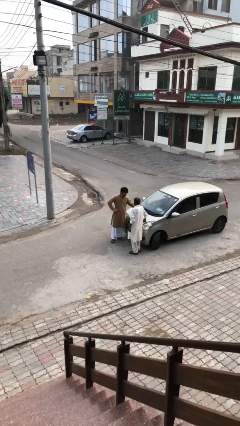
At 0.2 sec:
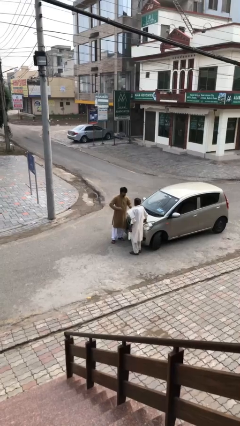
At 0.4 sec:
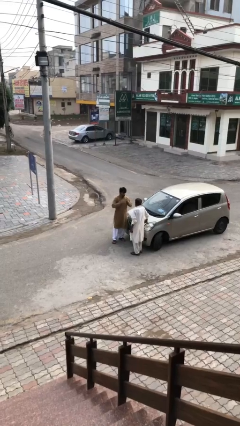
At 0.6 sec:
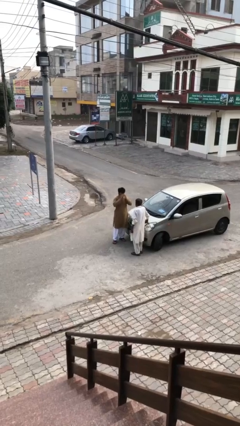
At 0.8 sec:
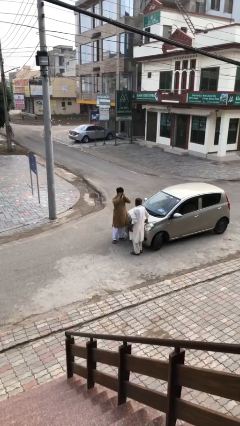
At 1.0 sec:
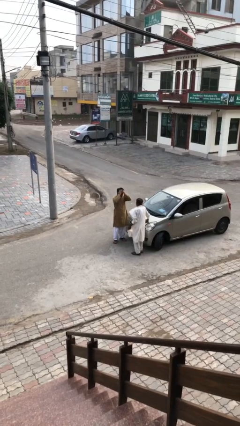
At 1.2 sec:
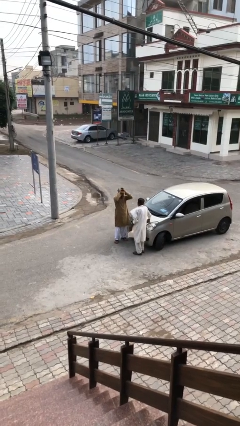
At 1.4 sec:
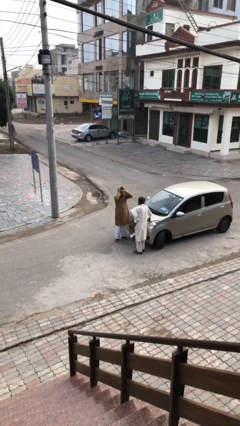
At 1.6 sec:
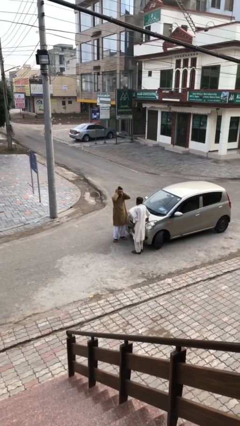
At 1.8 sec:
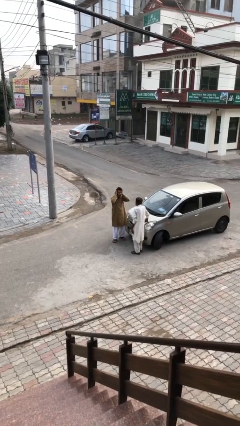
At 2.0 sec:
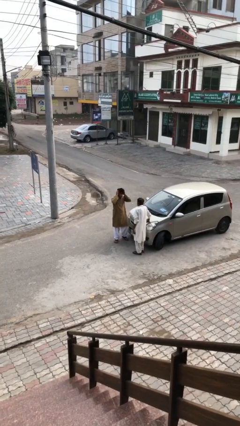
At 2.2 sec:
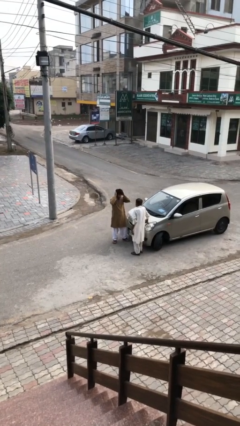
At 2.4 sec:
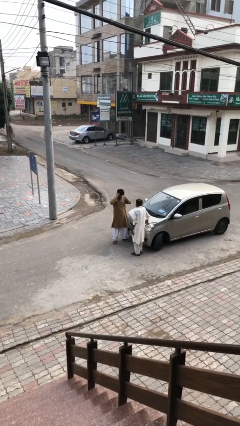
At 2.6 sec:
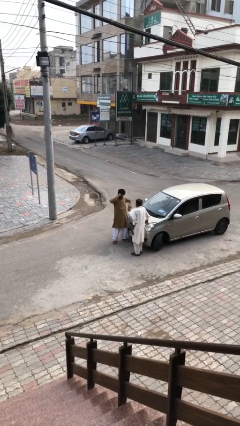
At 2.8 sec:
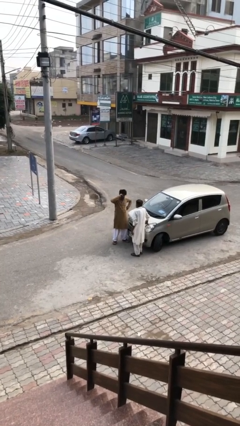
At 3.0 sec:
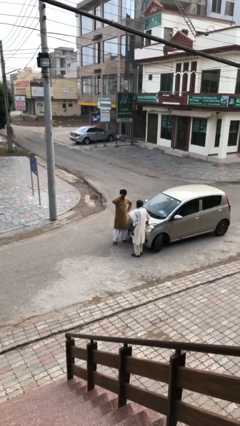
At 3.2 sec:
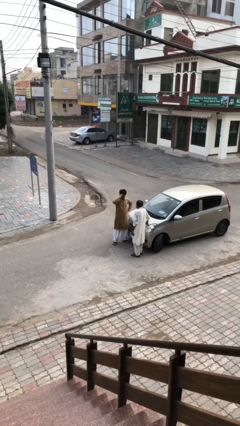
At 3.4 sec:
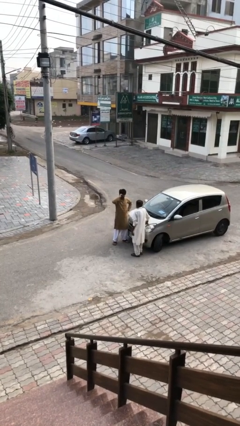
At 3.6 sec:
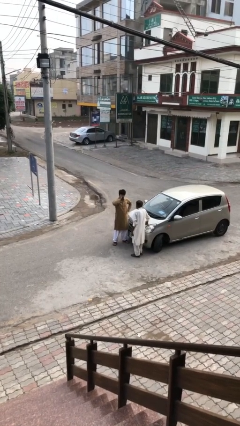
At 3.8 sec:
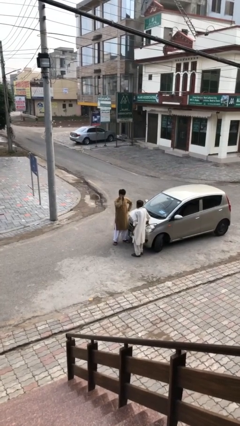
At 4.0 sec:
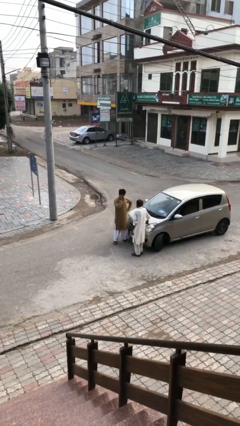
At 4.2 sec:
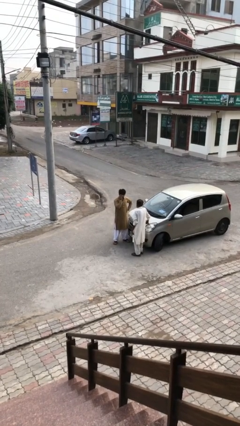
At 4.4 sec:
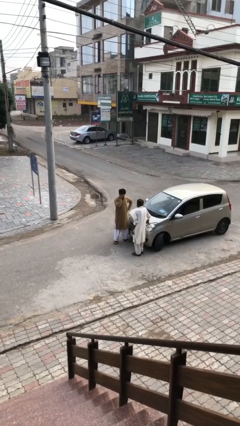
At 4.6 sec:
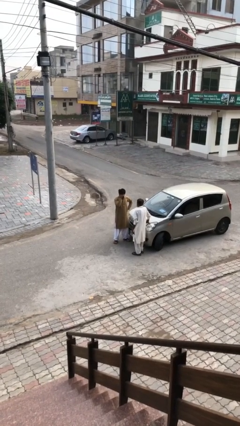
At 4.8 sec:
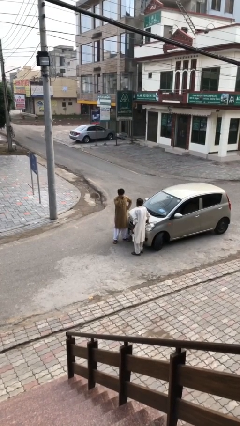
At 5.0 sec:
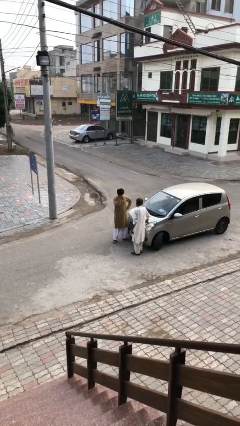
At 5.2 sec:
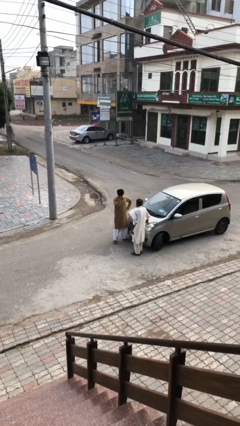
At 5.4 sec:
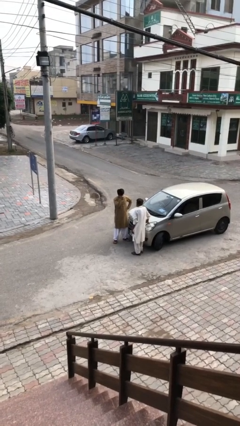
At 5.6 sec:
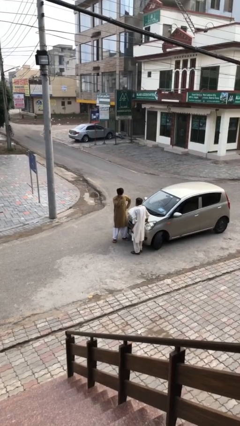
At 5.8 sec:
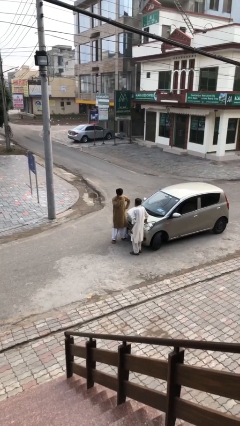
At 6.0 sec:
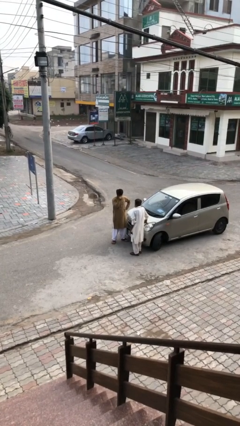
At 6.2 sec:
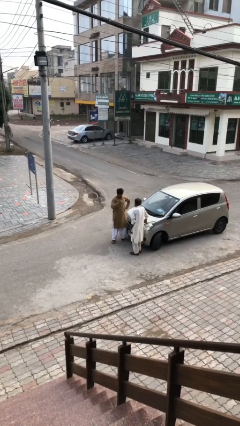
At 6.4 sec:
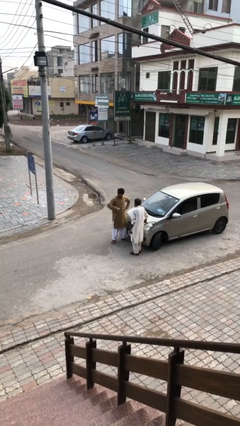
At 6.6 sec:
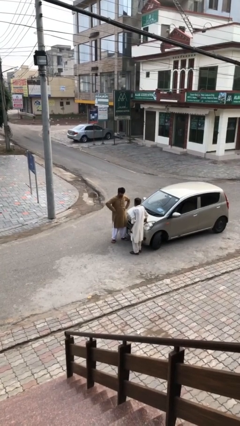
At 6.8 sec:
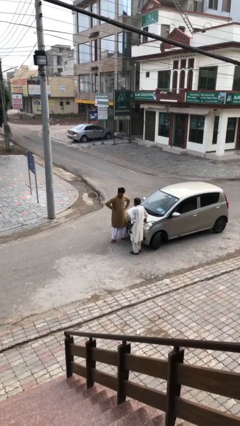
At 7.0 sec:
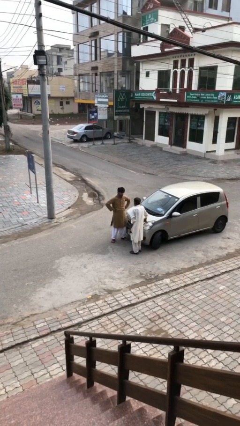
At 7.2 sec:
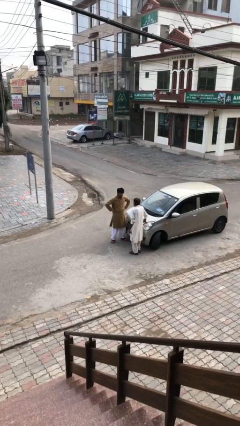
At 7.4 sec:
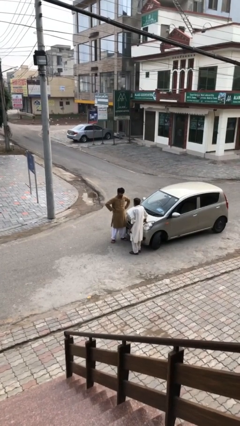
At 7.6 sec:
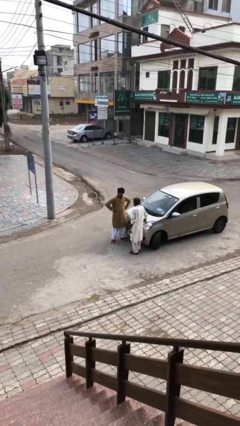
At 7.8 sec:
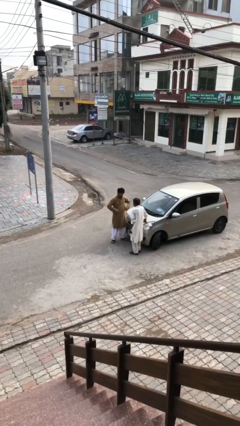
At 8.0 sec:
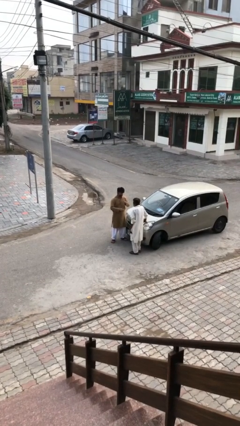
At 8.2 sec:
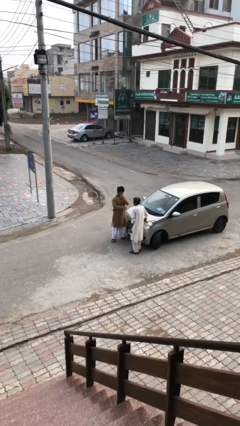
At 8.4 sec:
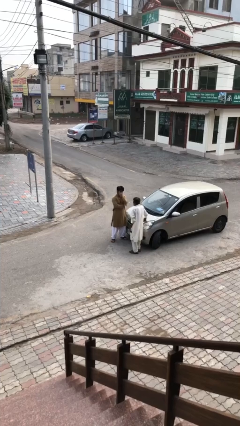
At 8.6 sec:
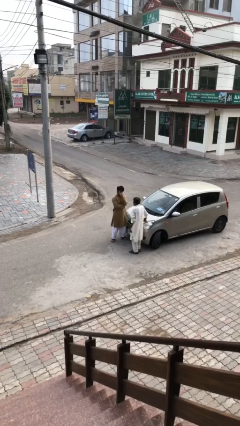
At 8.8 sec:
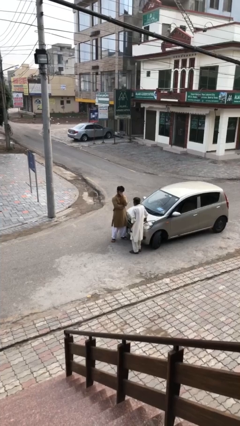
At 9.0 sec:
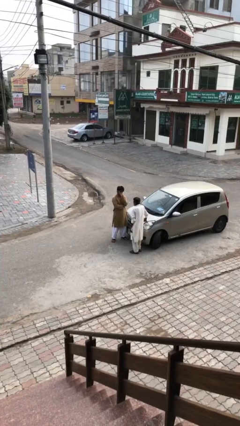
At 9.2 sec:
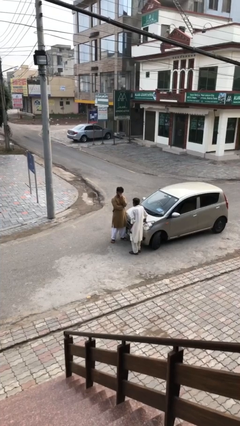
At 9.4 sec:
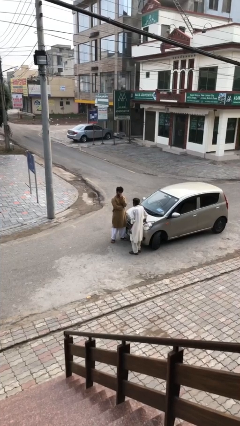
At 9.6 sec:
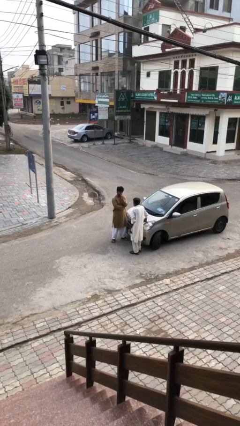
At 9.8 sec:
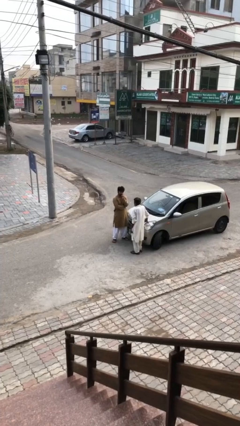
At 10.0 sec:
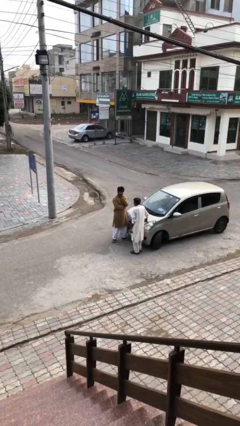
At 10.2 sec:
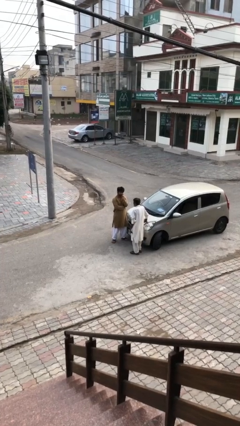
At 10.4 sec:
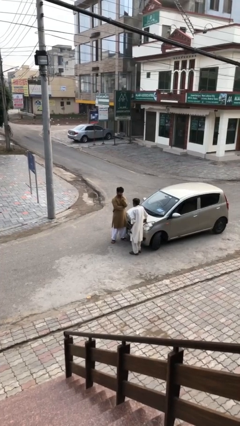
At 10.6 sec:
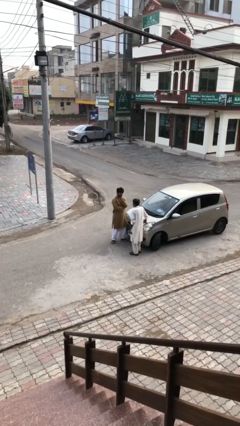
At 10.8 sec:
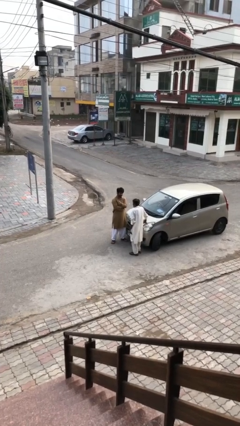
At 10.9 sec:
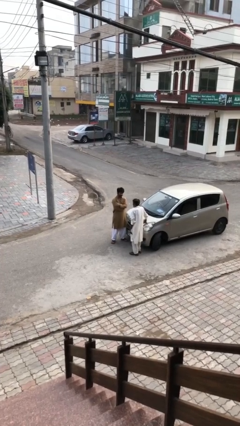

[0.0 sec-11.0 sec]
person talks to person

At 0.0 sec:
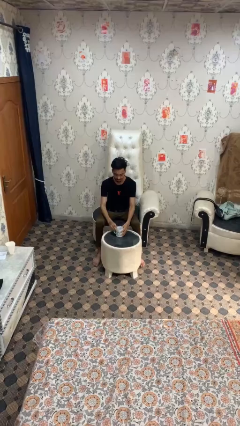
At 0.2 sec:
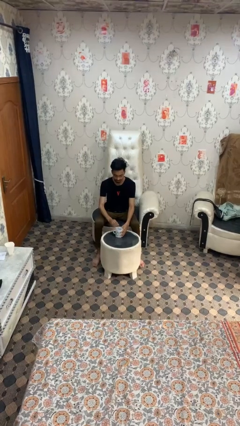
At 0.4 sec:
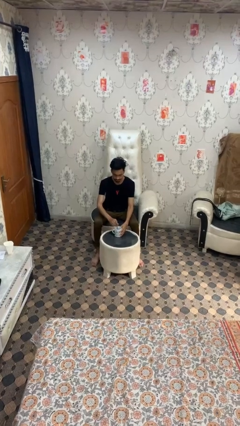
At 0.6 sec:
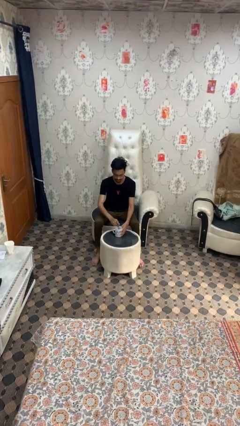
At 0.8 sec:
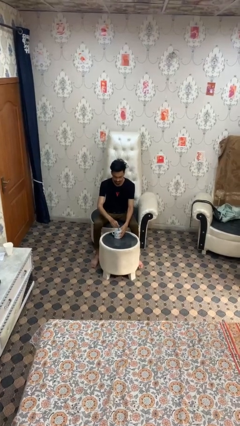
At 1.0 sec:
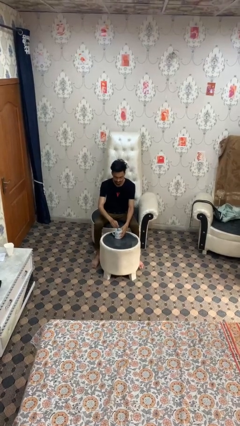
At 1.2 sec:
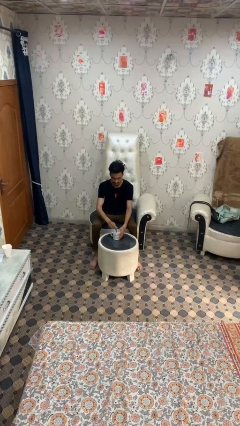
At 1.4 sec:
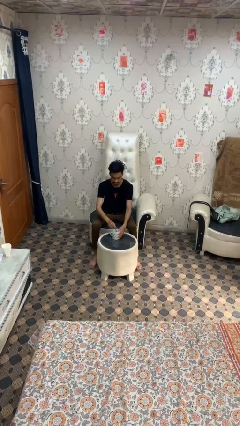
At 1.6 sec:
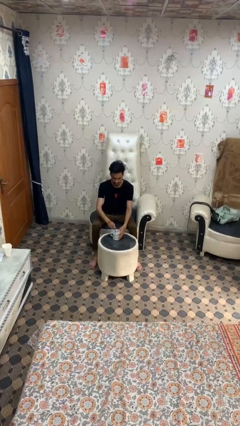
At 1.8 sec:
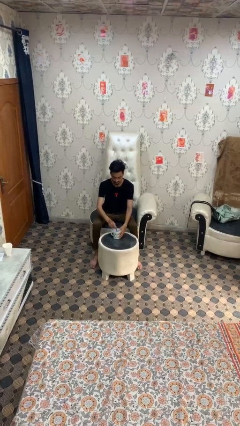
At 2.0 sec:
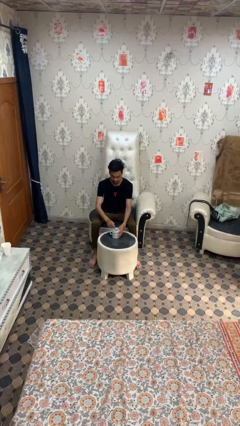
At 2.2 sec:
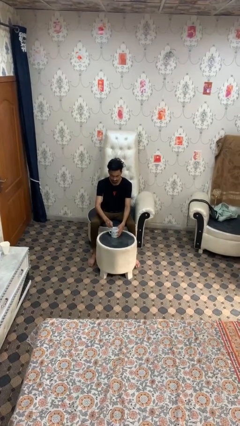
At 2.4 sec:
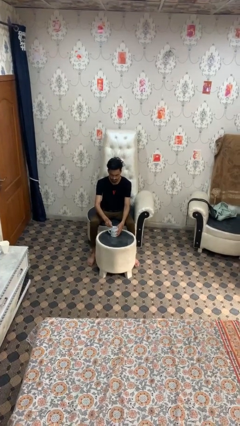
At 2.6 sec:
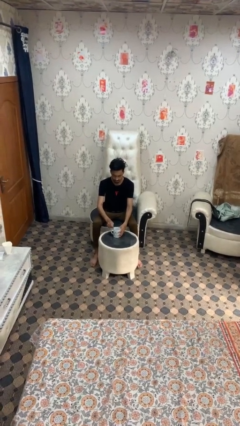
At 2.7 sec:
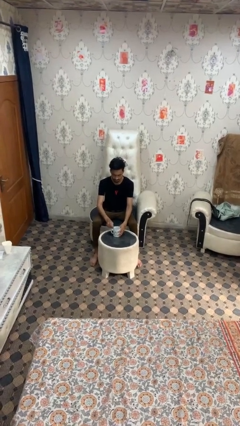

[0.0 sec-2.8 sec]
person stirs mug

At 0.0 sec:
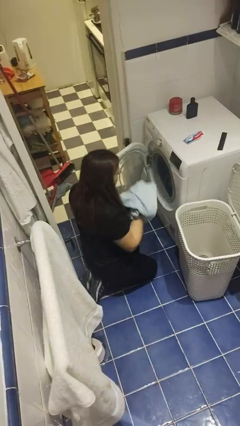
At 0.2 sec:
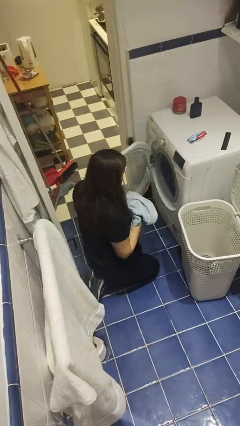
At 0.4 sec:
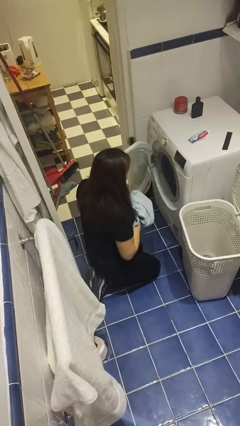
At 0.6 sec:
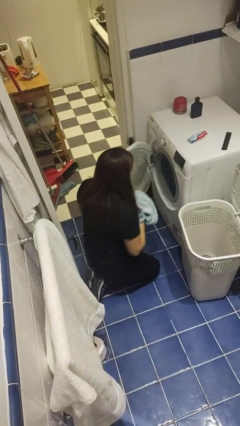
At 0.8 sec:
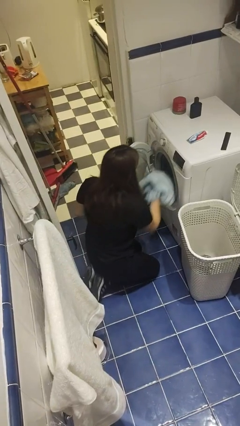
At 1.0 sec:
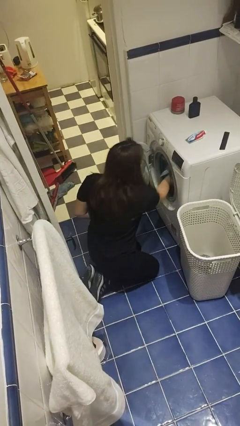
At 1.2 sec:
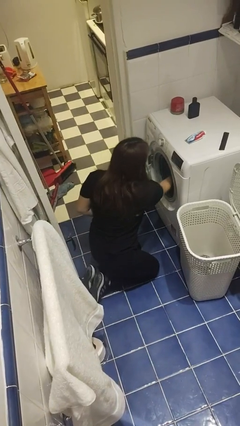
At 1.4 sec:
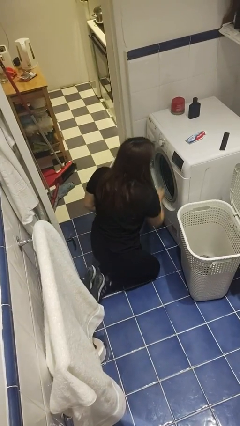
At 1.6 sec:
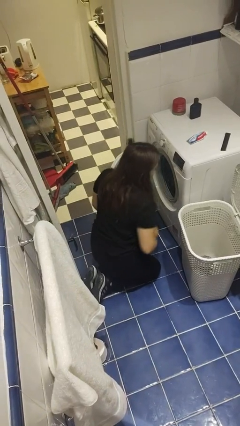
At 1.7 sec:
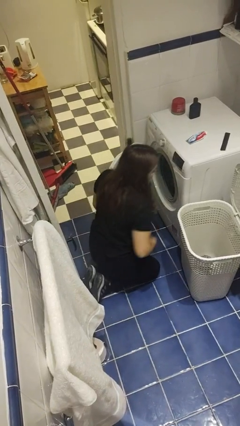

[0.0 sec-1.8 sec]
person loads clotheswasher

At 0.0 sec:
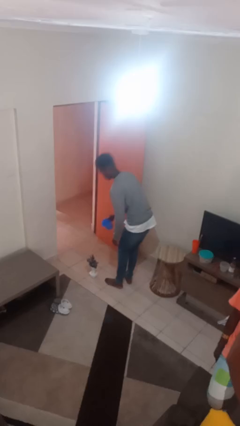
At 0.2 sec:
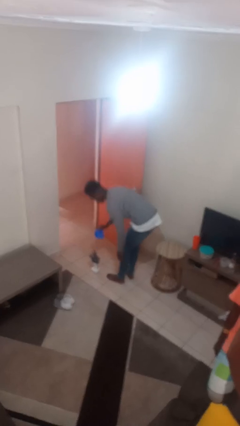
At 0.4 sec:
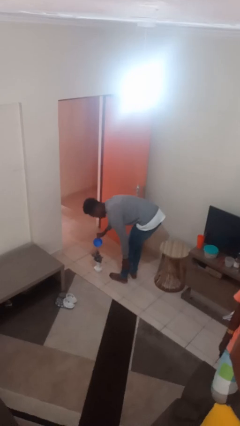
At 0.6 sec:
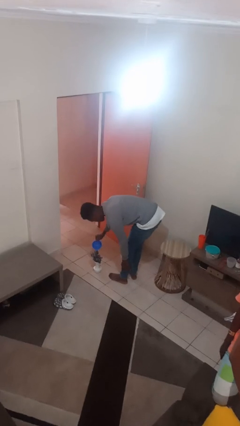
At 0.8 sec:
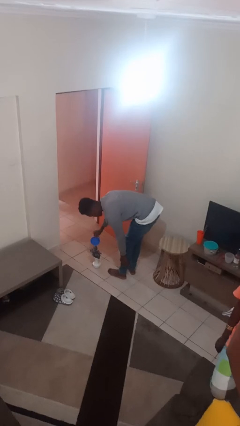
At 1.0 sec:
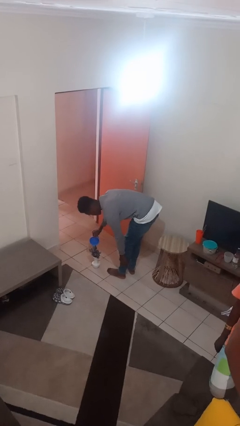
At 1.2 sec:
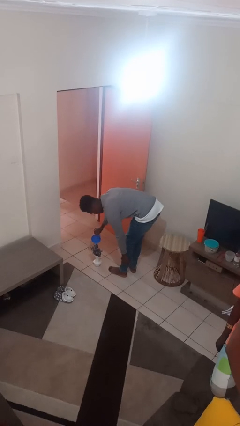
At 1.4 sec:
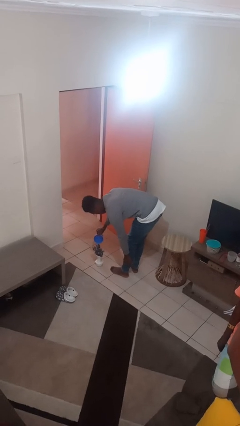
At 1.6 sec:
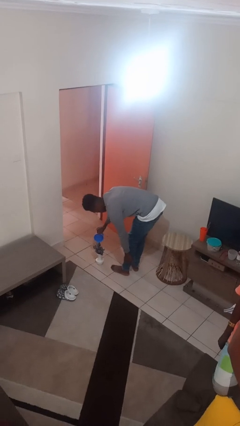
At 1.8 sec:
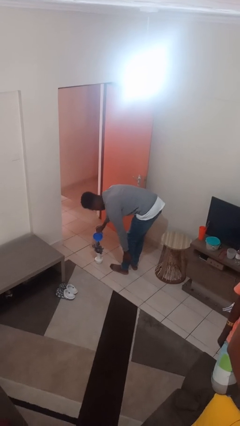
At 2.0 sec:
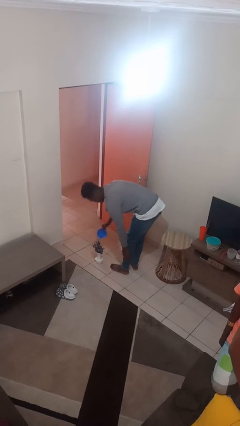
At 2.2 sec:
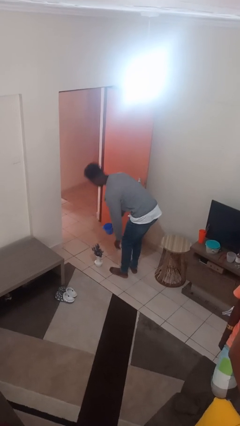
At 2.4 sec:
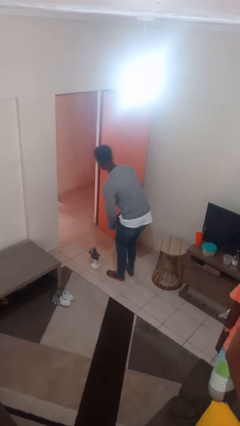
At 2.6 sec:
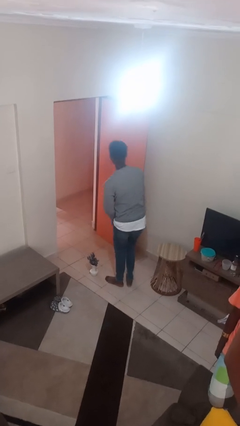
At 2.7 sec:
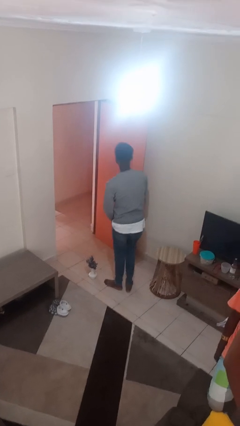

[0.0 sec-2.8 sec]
person waters houseplant
